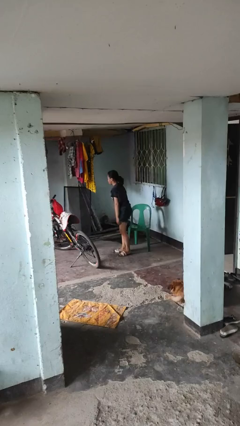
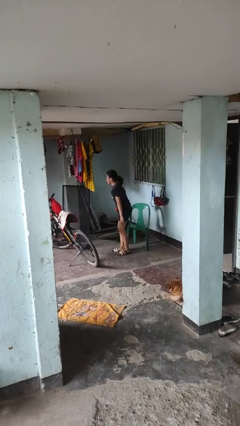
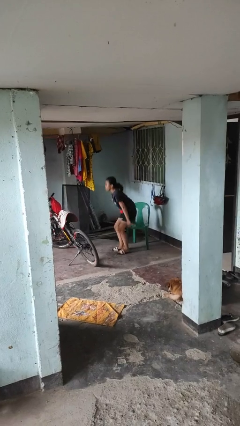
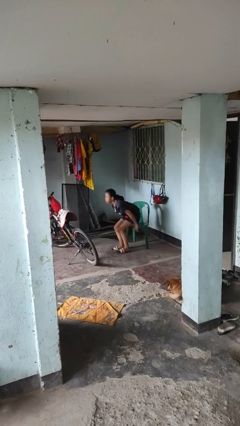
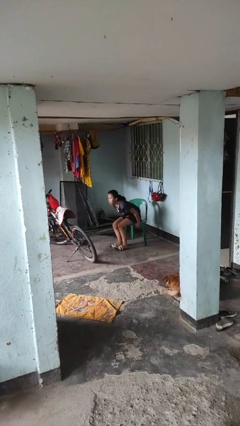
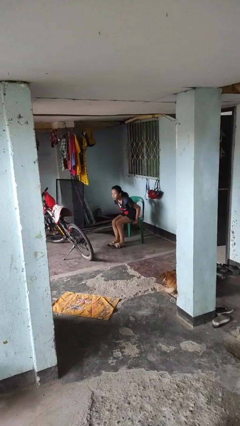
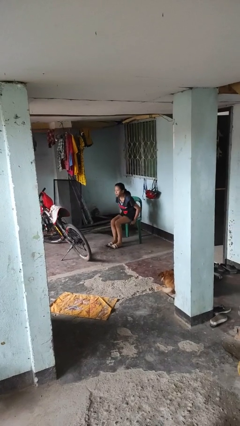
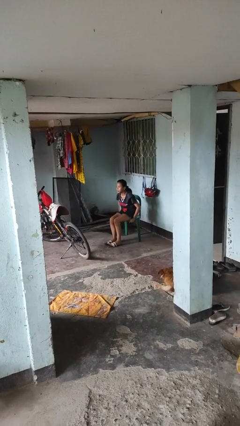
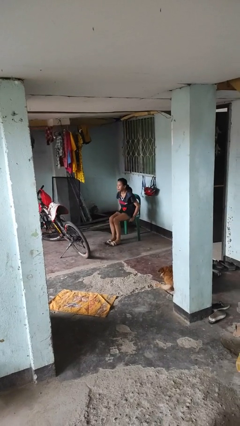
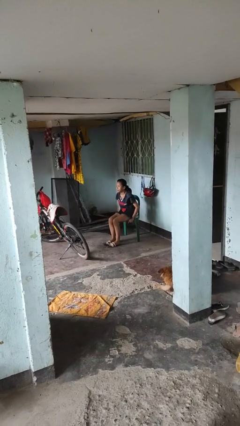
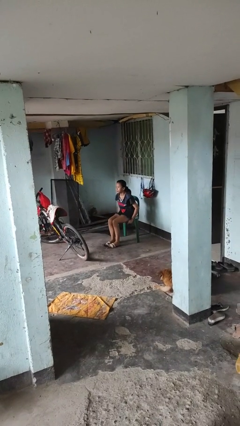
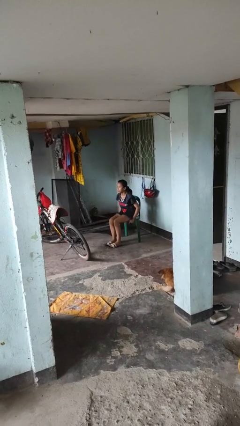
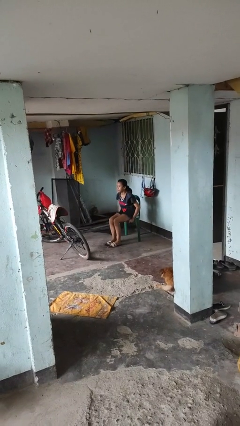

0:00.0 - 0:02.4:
person sits down

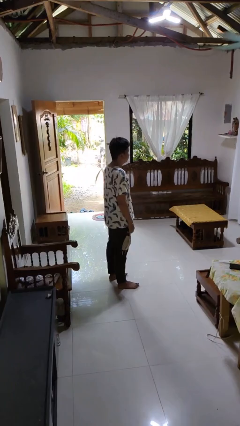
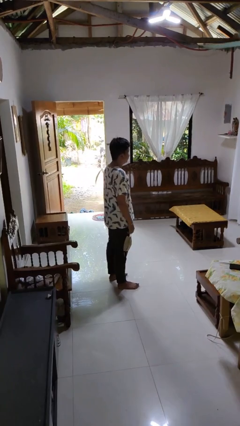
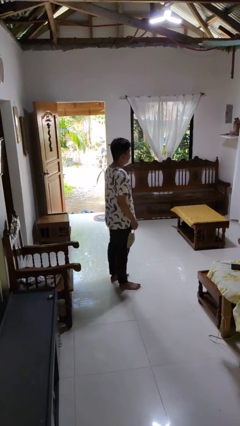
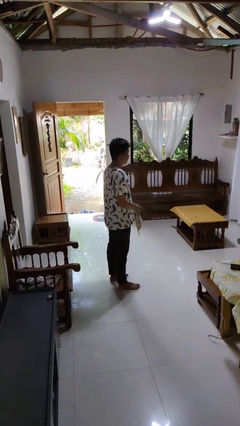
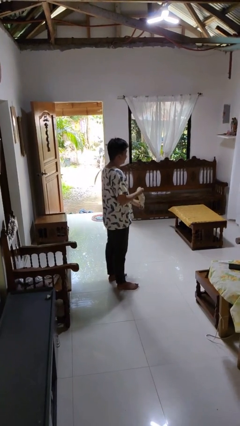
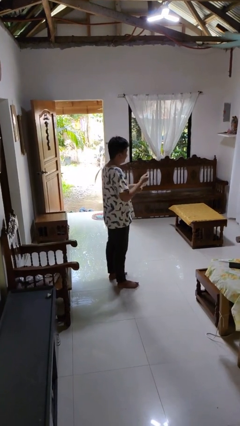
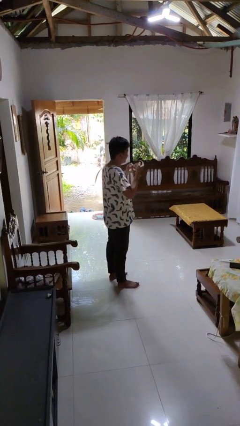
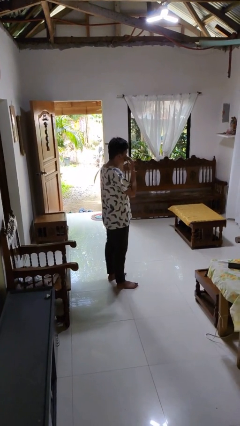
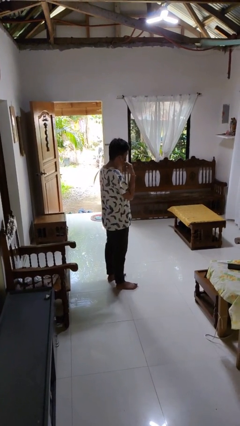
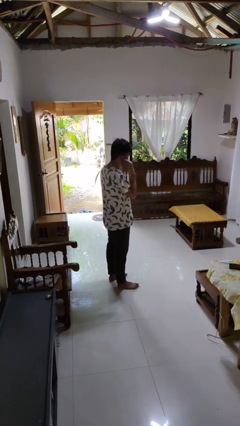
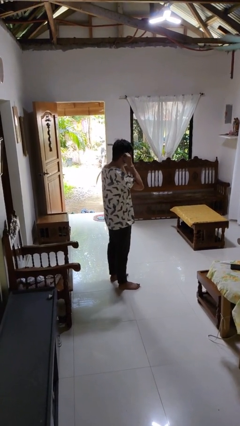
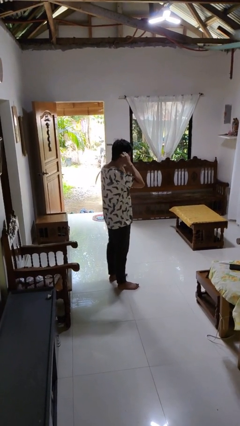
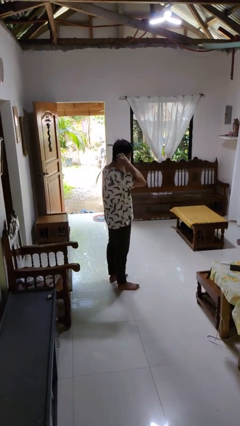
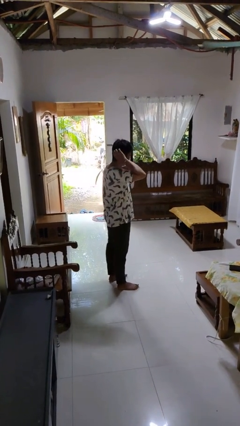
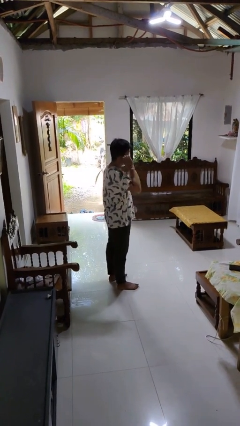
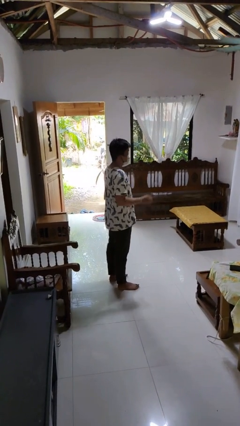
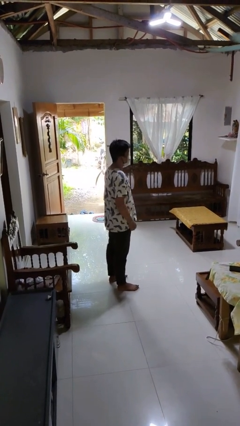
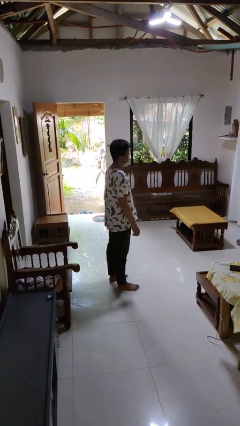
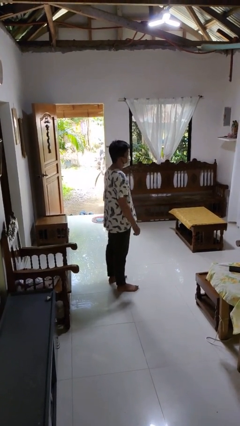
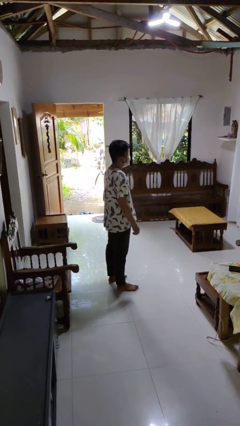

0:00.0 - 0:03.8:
person puts on facemask

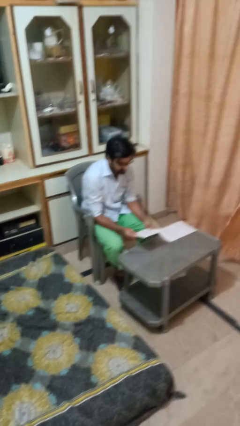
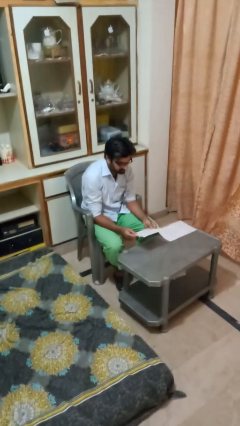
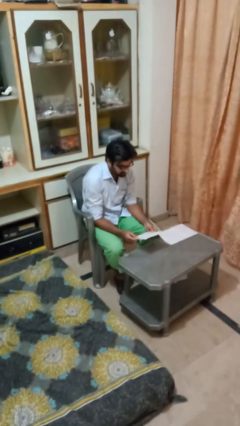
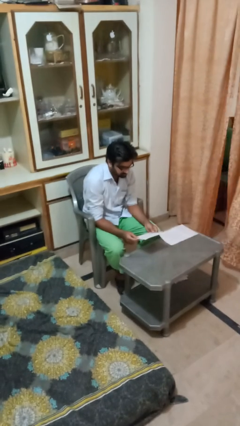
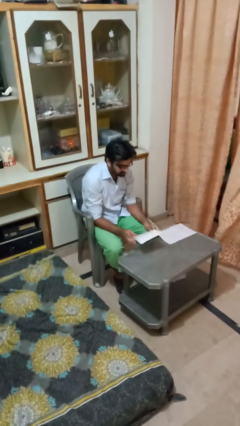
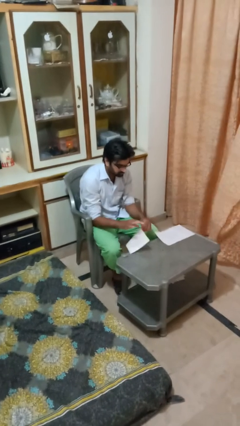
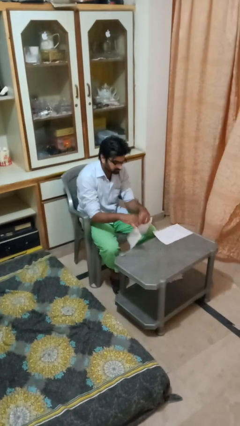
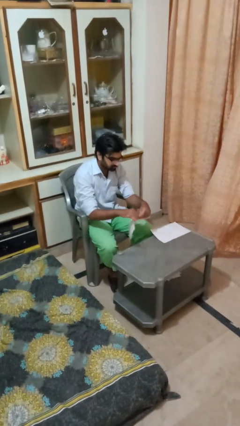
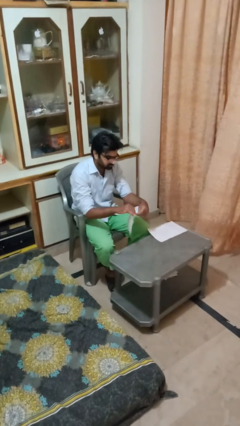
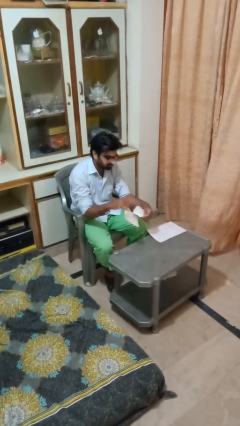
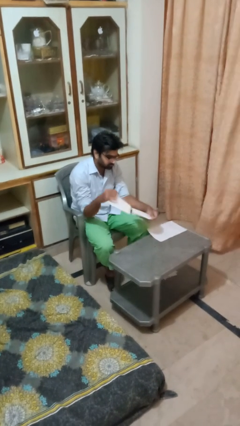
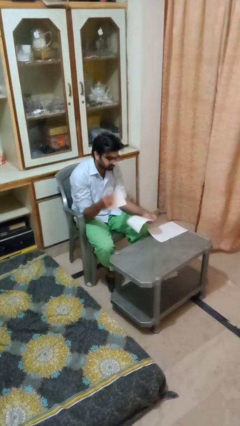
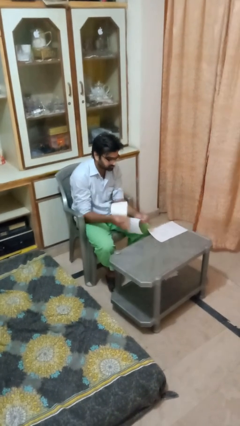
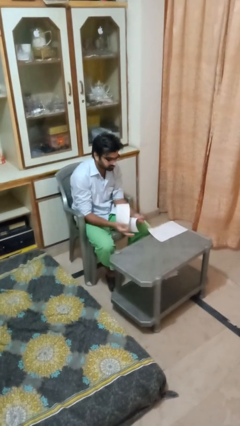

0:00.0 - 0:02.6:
person tears paper

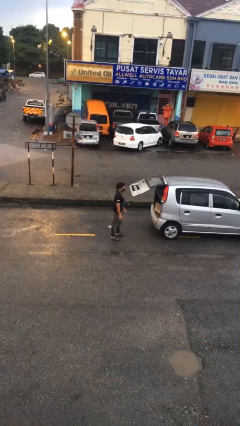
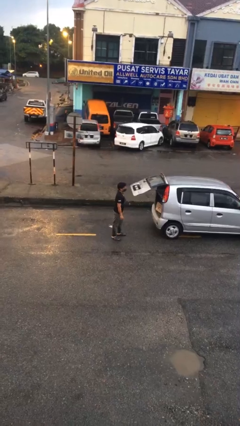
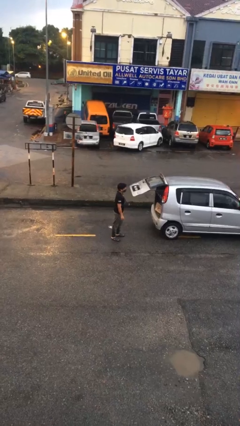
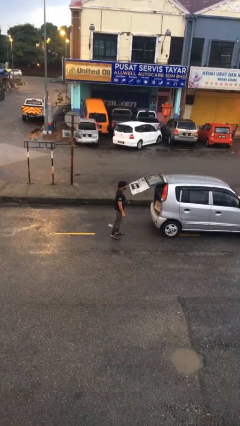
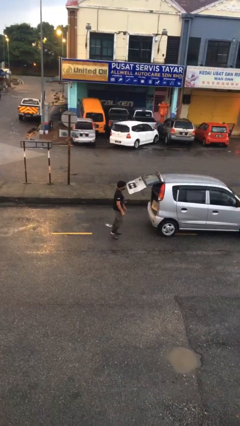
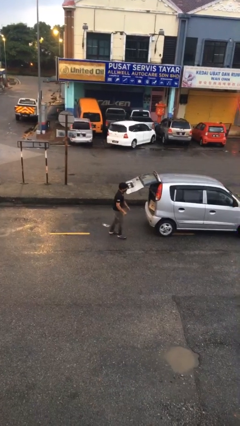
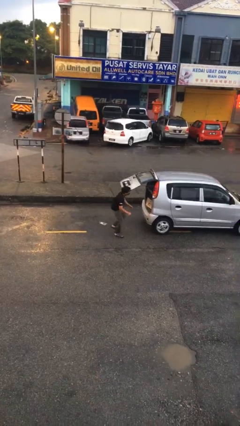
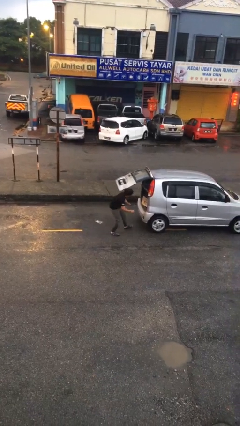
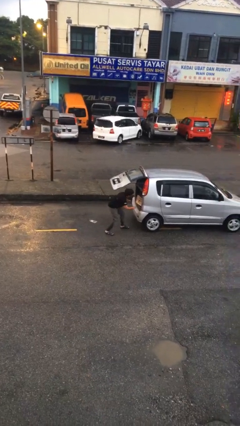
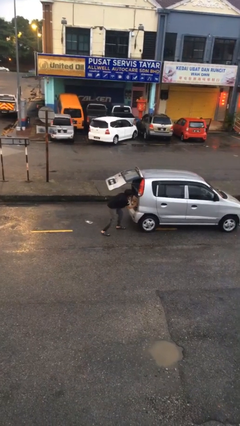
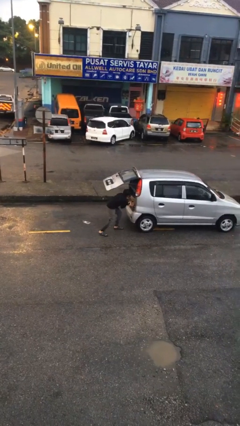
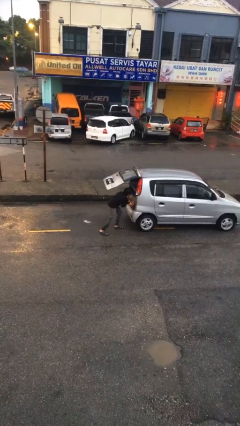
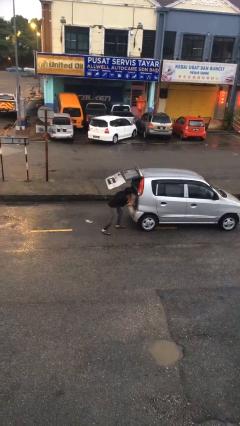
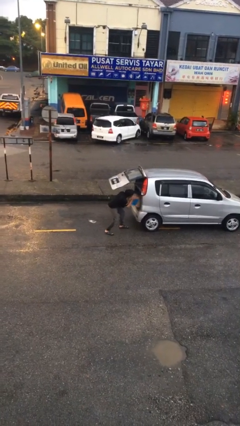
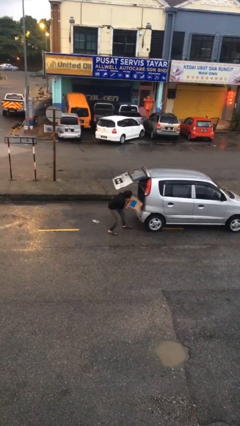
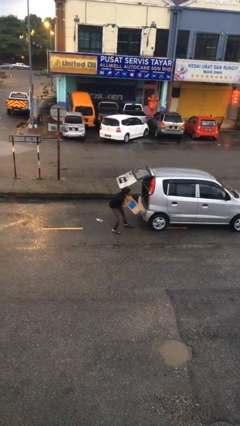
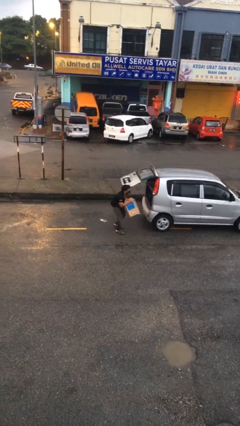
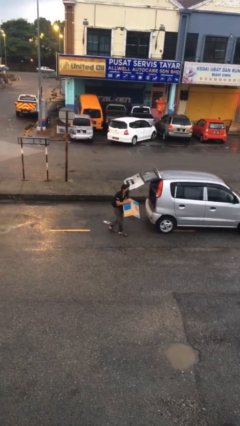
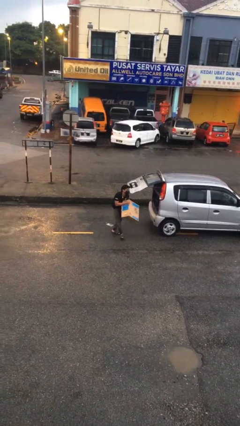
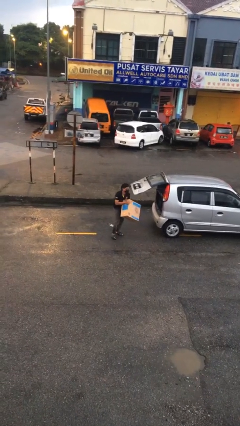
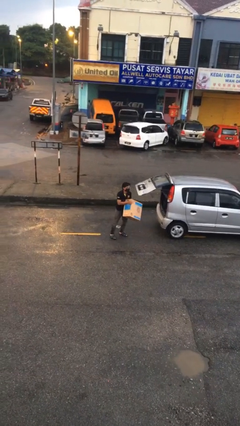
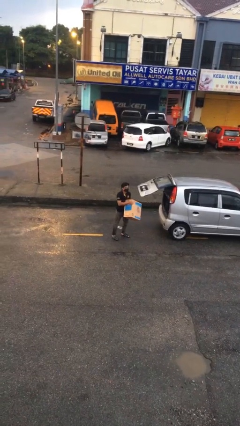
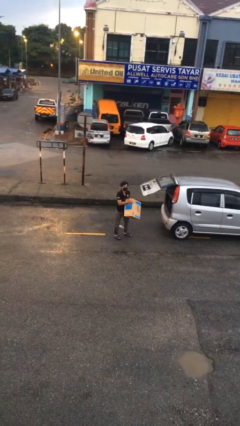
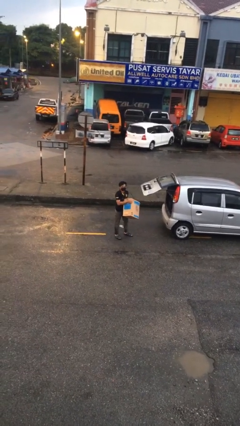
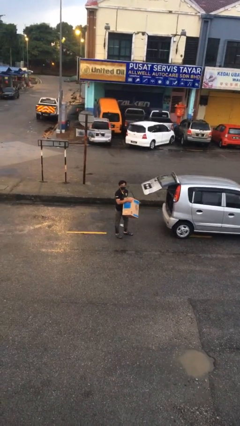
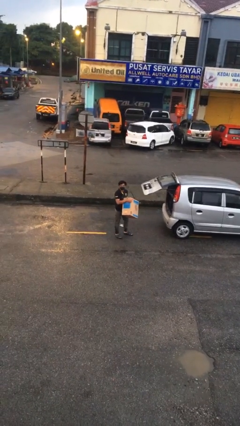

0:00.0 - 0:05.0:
person unloads car

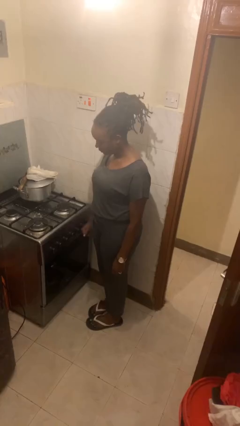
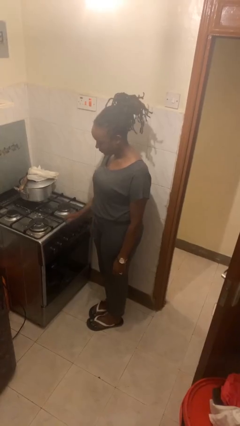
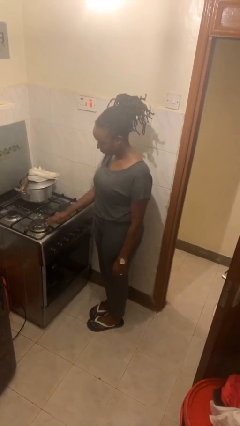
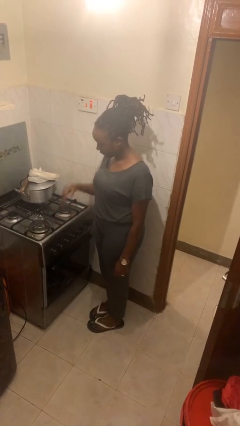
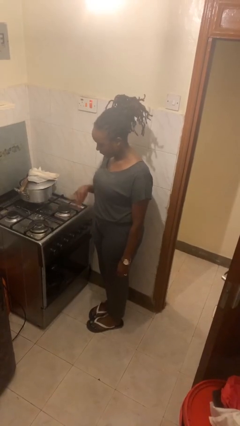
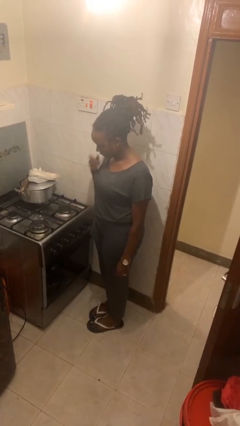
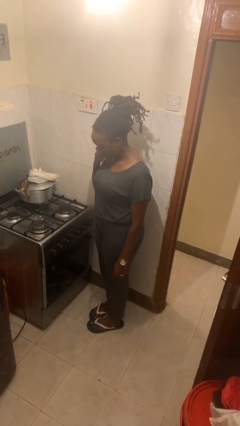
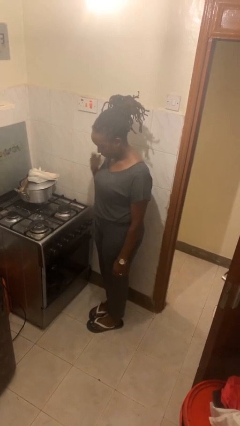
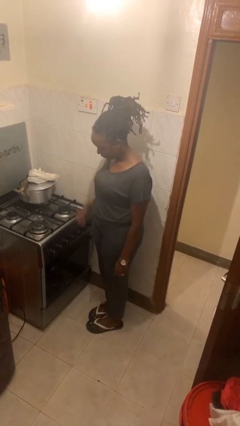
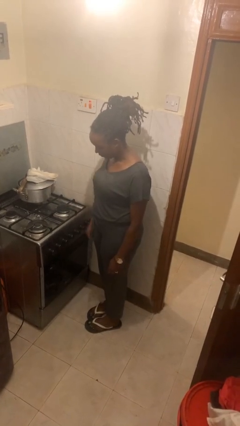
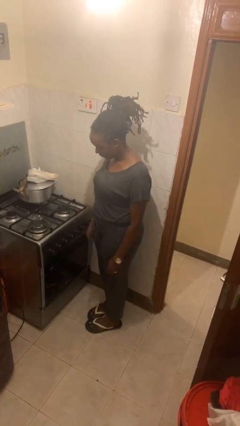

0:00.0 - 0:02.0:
person burns hand

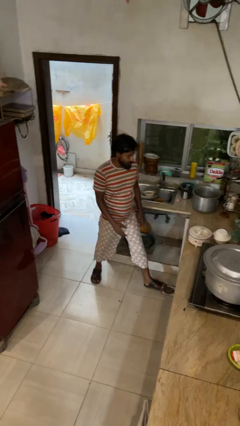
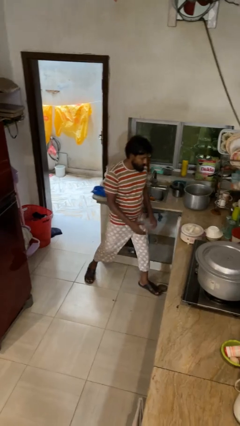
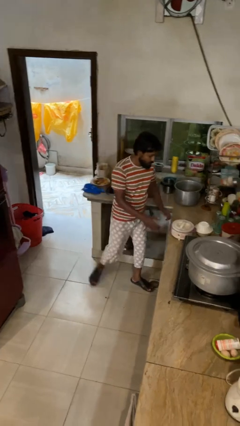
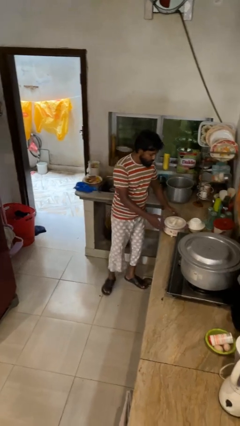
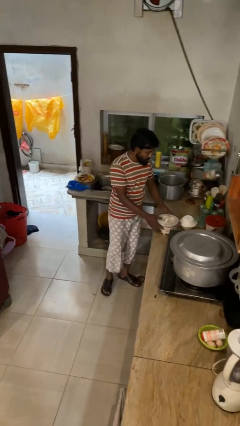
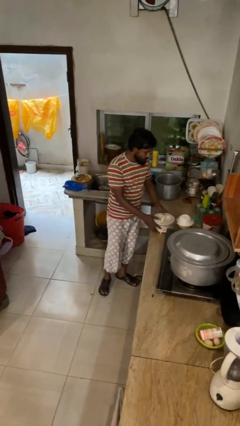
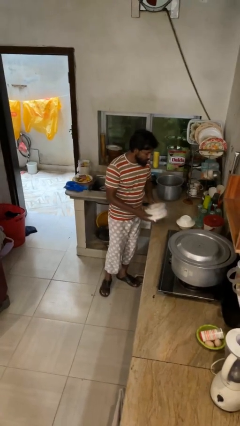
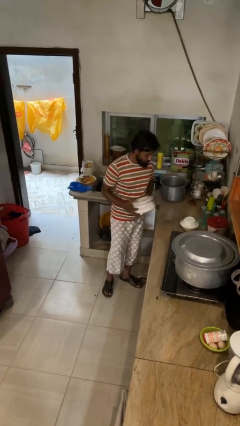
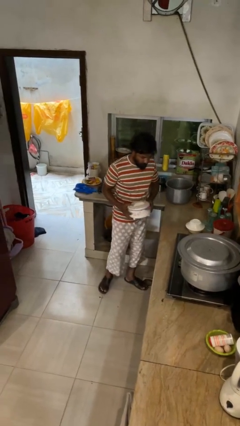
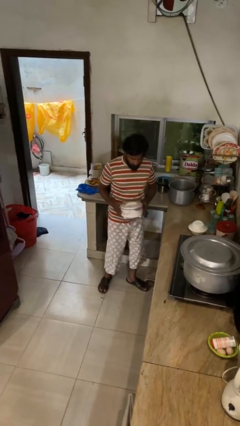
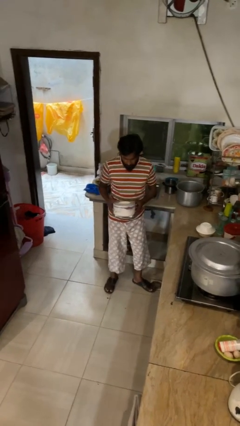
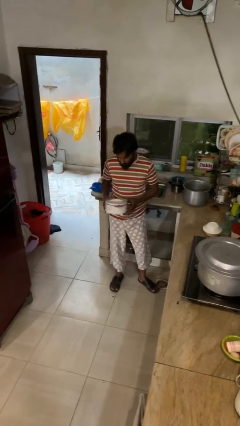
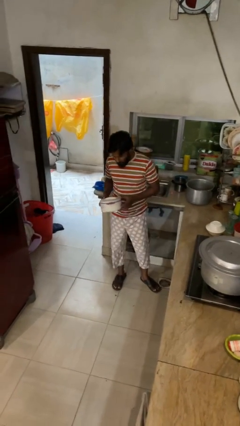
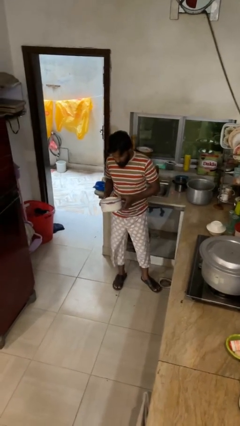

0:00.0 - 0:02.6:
person picks up object from countertop
